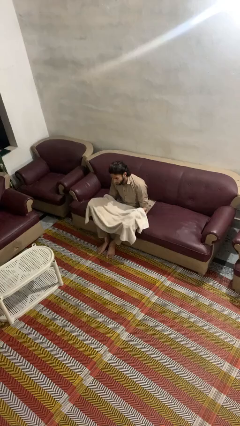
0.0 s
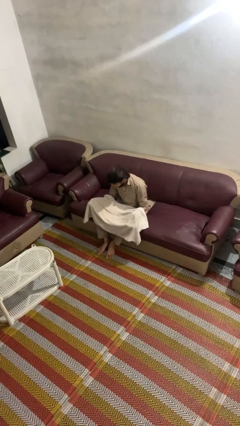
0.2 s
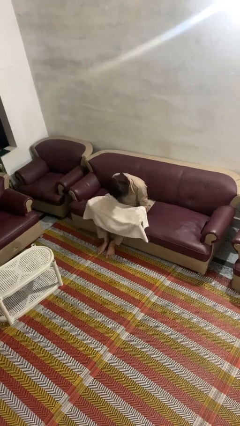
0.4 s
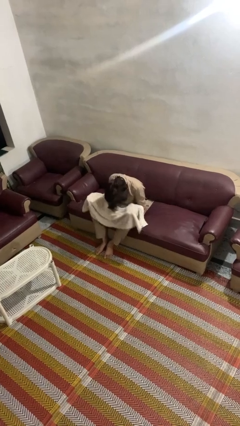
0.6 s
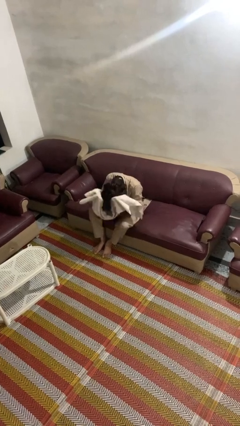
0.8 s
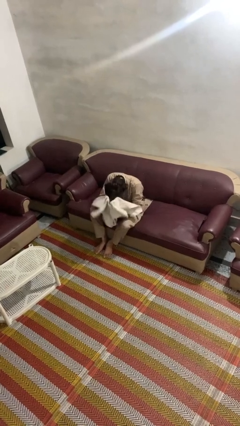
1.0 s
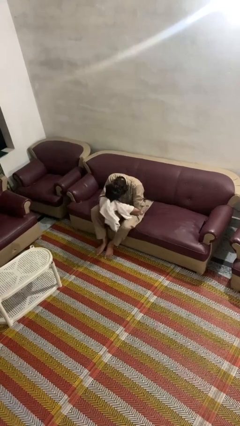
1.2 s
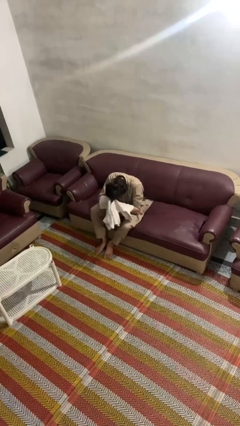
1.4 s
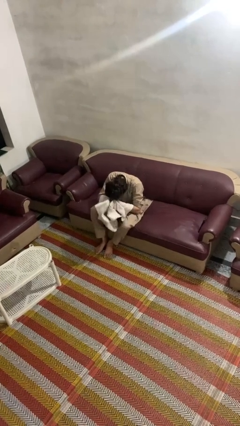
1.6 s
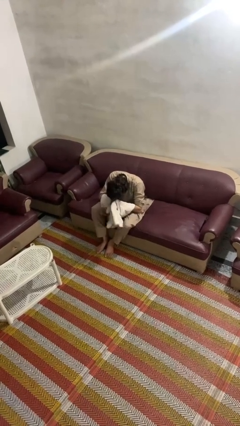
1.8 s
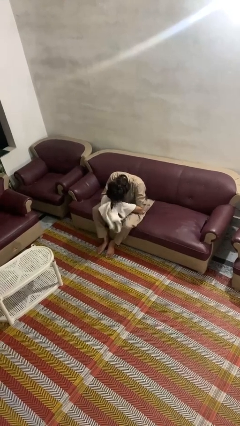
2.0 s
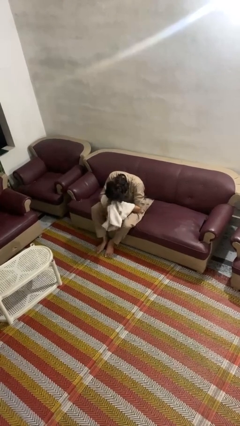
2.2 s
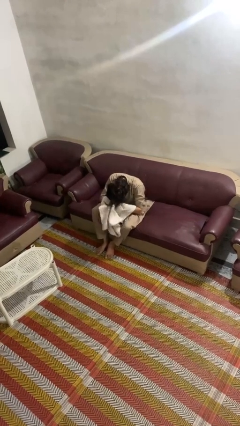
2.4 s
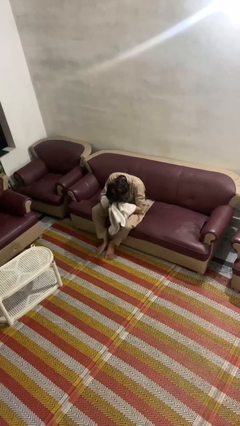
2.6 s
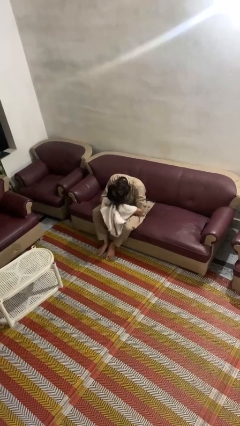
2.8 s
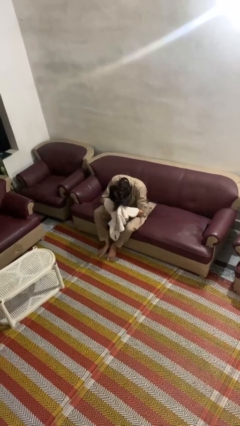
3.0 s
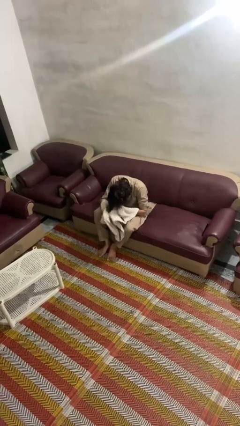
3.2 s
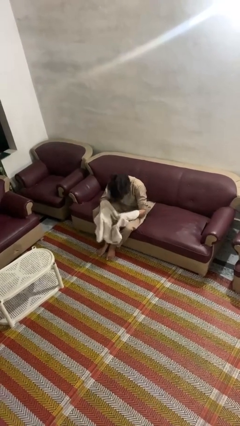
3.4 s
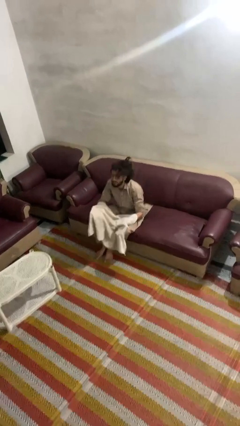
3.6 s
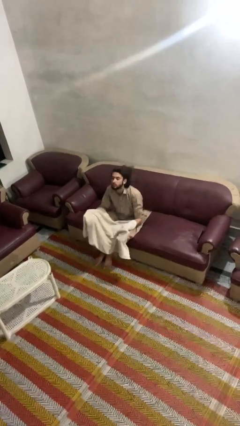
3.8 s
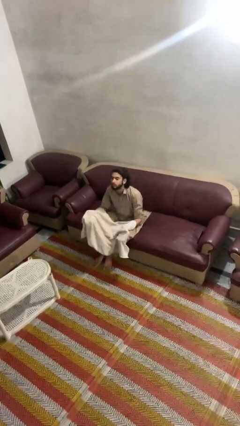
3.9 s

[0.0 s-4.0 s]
person dries hair with towel

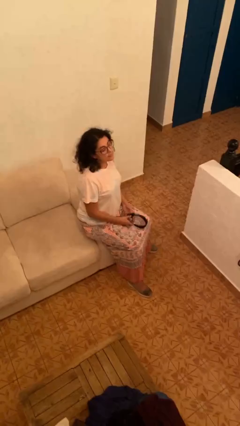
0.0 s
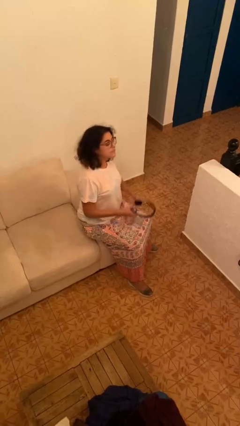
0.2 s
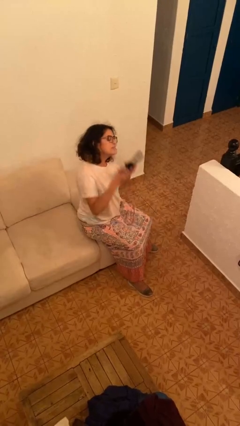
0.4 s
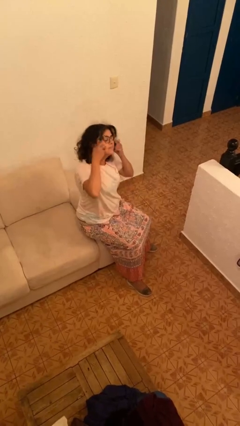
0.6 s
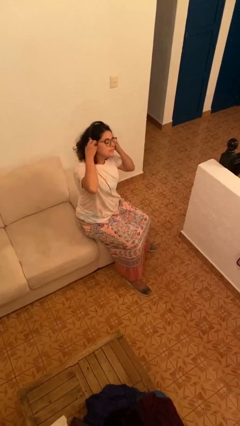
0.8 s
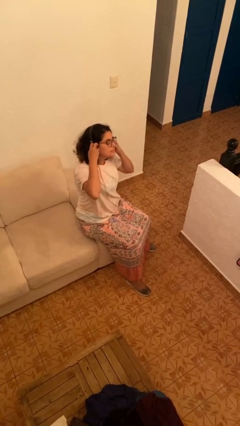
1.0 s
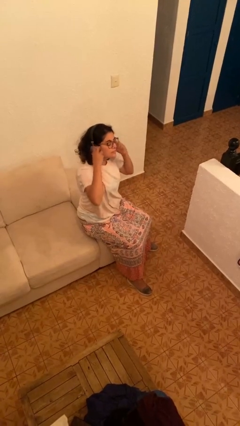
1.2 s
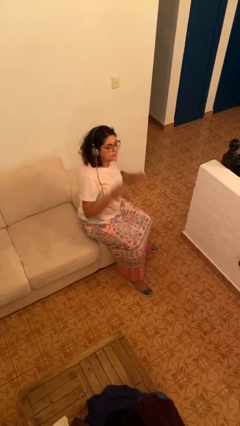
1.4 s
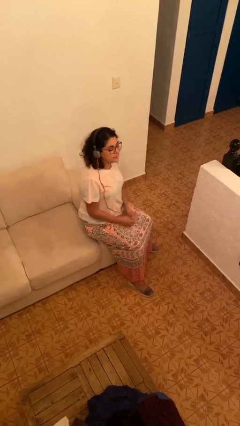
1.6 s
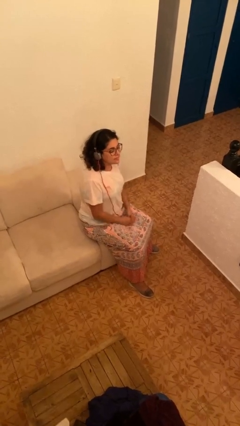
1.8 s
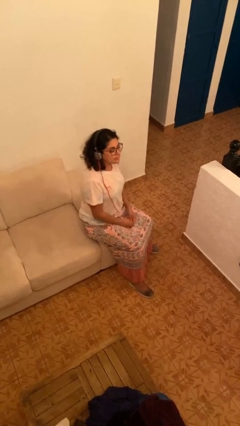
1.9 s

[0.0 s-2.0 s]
person puts on headphones

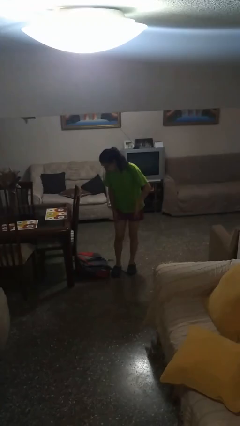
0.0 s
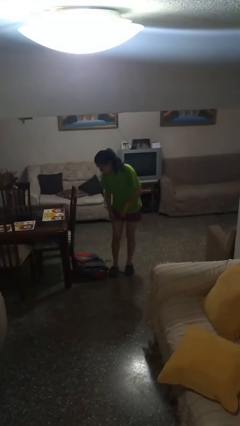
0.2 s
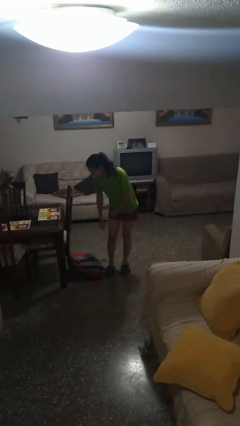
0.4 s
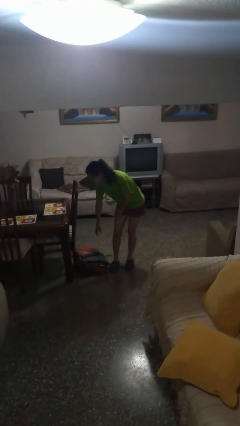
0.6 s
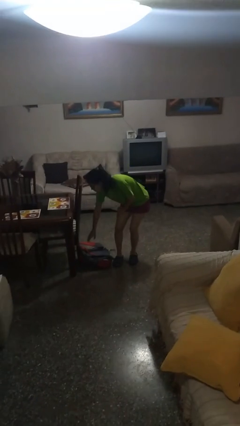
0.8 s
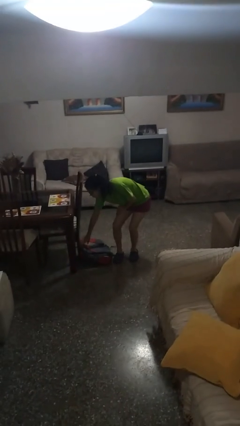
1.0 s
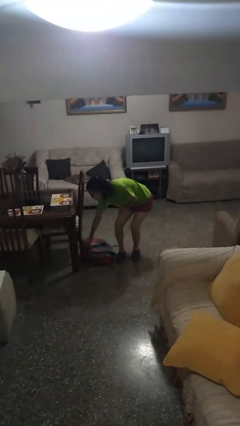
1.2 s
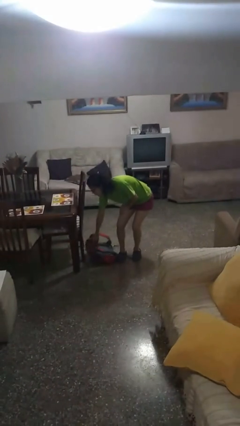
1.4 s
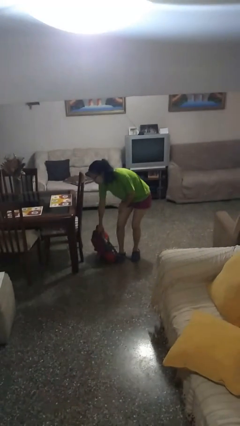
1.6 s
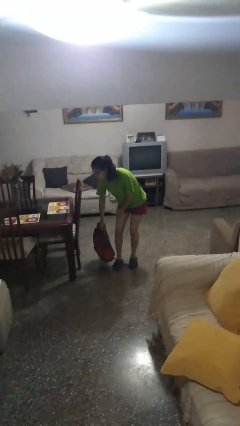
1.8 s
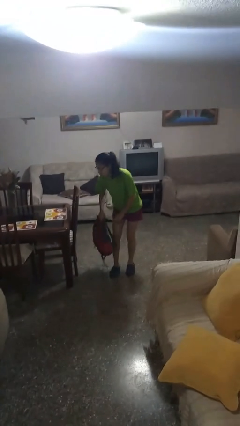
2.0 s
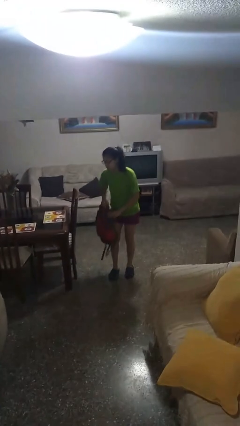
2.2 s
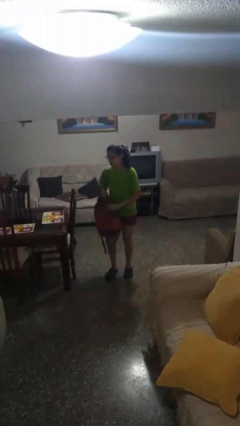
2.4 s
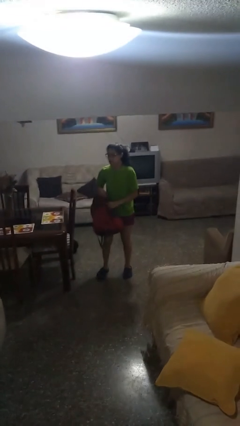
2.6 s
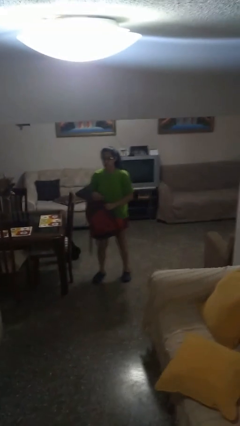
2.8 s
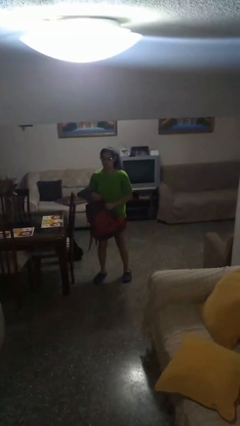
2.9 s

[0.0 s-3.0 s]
person picks up object from floor

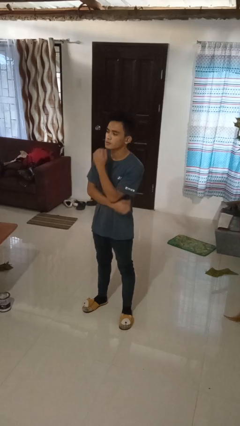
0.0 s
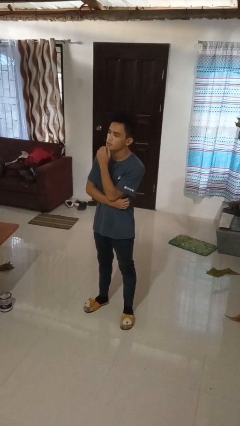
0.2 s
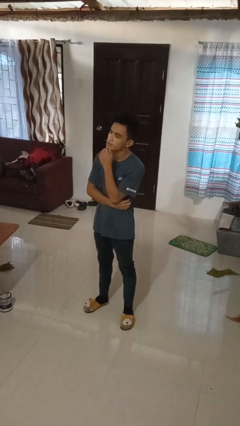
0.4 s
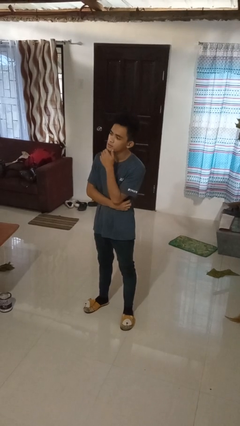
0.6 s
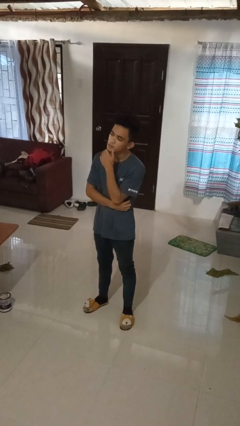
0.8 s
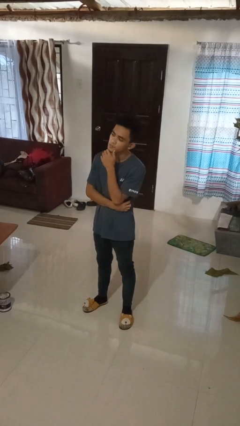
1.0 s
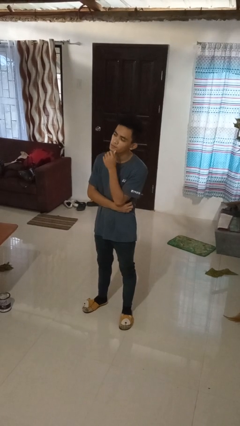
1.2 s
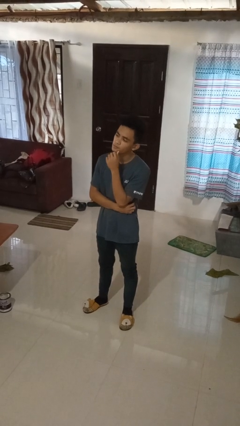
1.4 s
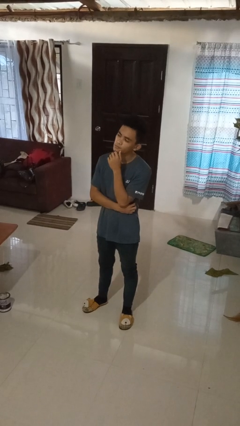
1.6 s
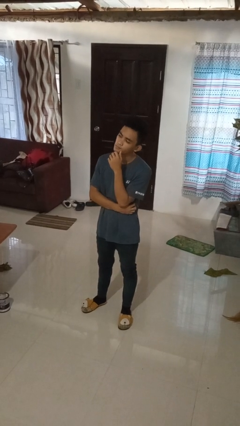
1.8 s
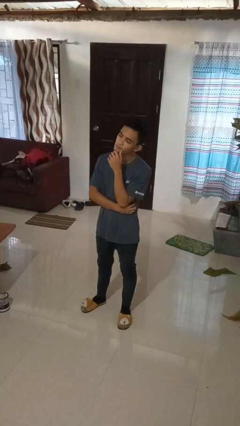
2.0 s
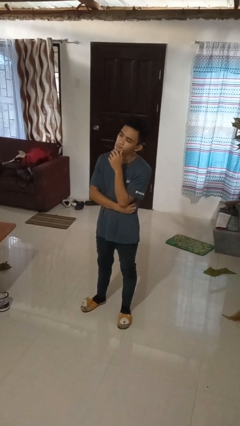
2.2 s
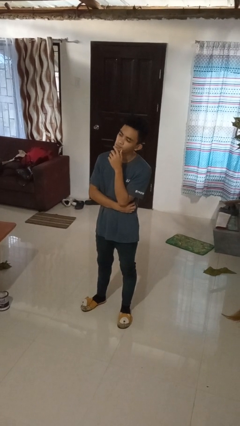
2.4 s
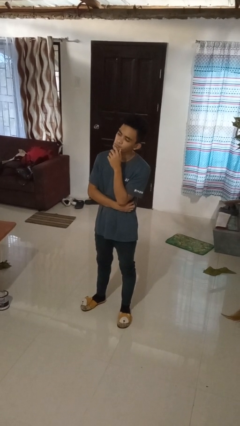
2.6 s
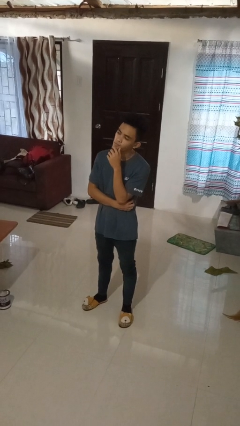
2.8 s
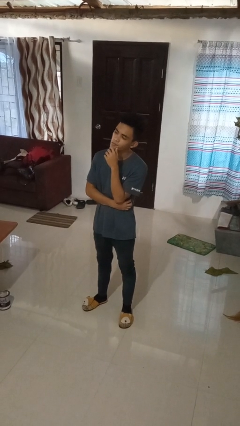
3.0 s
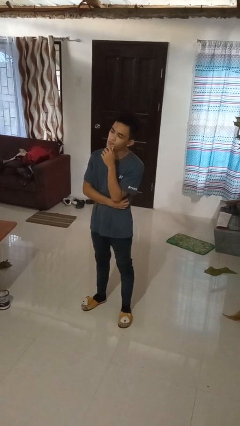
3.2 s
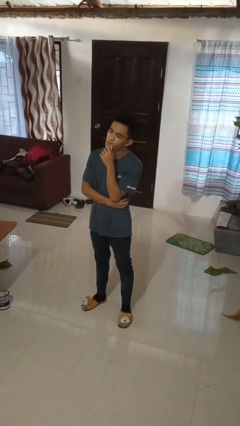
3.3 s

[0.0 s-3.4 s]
person strokes chin

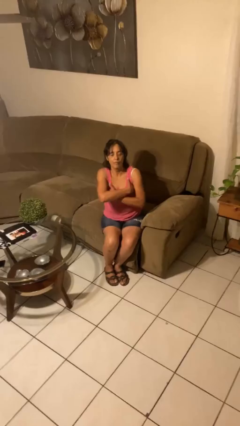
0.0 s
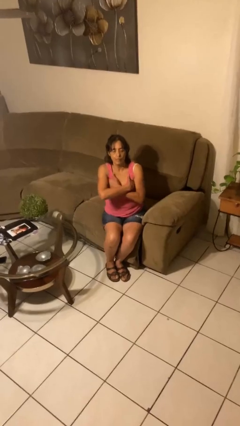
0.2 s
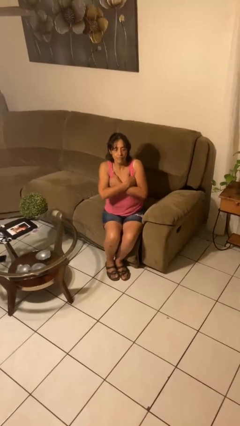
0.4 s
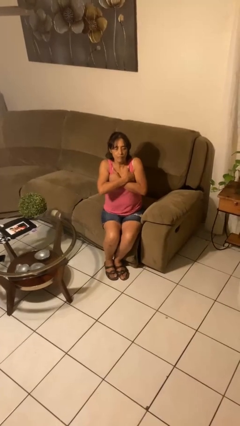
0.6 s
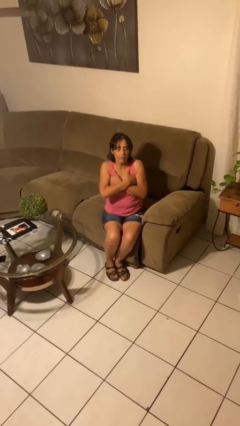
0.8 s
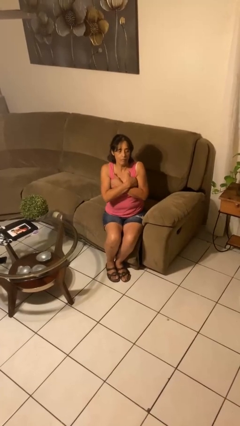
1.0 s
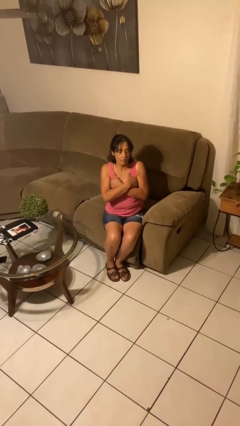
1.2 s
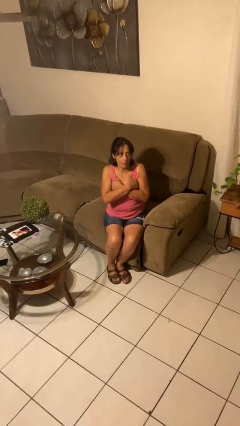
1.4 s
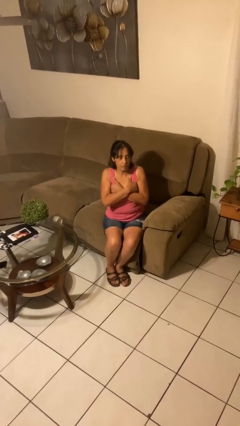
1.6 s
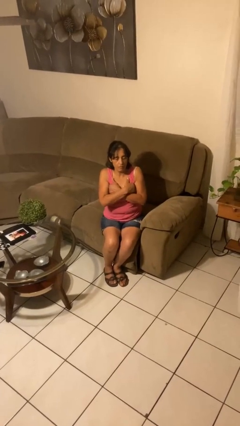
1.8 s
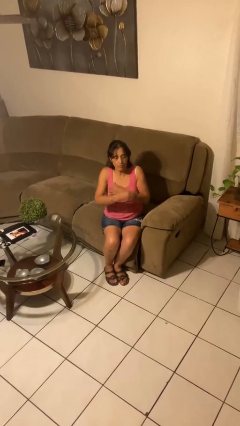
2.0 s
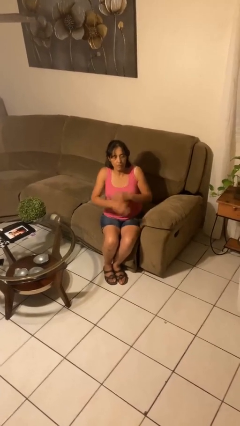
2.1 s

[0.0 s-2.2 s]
person gestures arms x

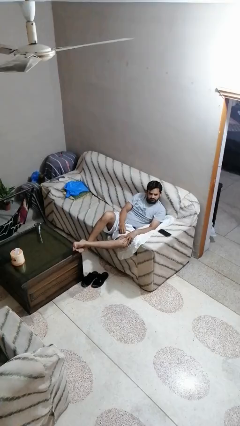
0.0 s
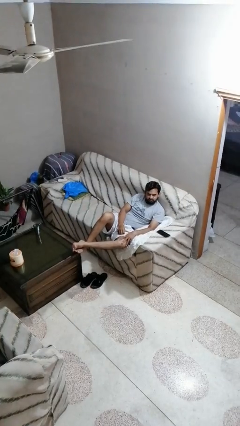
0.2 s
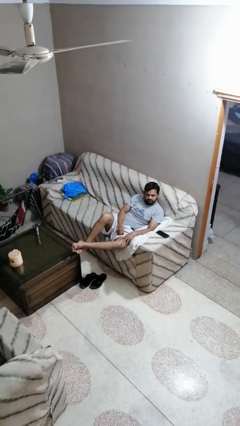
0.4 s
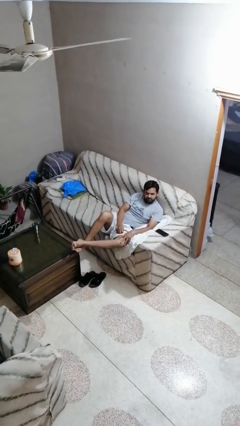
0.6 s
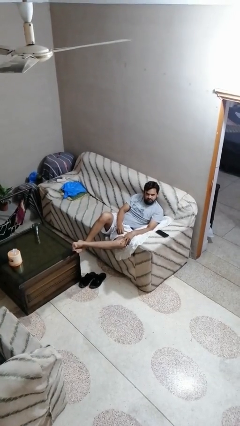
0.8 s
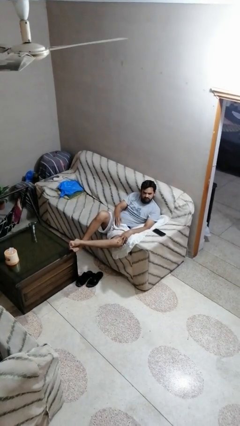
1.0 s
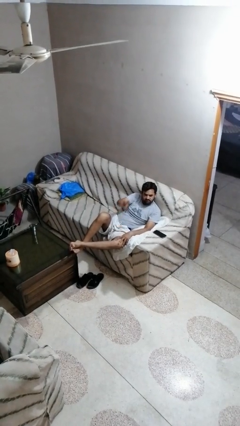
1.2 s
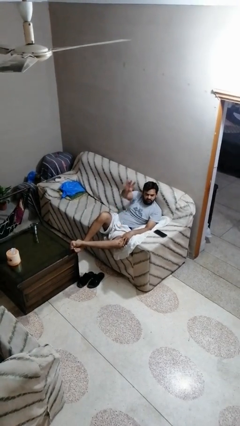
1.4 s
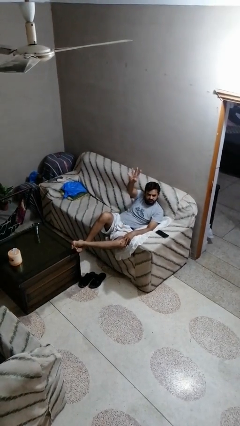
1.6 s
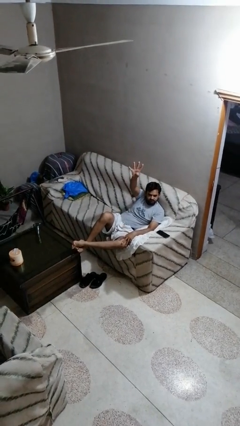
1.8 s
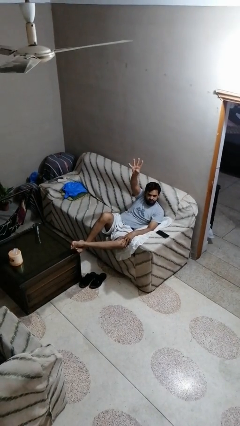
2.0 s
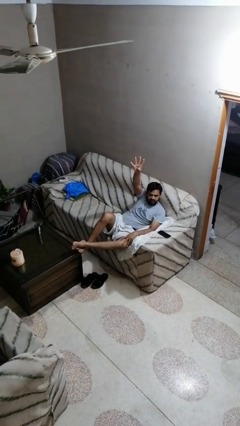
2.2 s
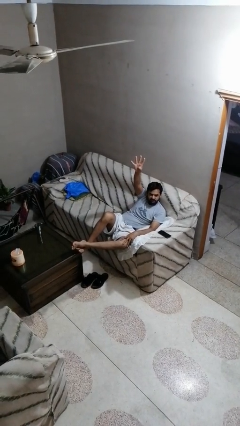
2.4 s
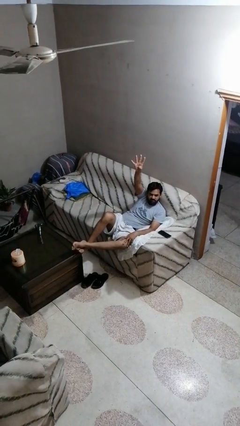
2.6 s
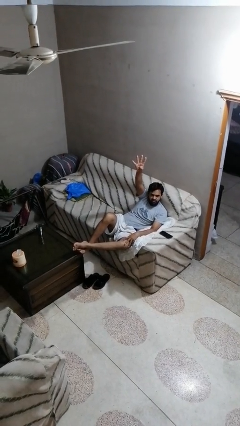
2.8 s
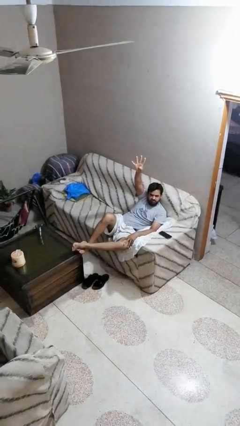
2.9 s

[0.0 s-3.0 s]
person gestures number four
